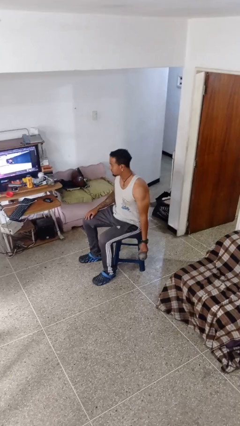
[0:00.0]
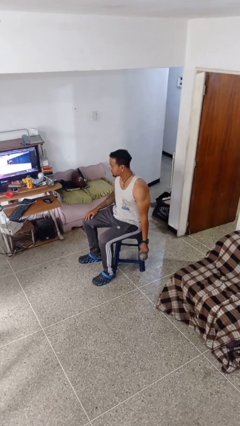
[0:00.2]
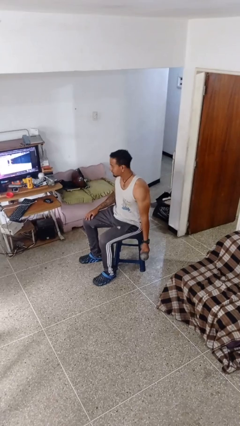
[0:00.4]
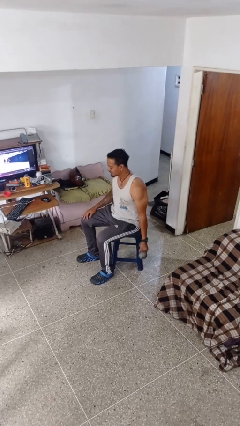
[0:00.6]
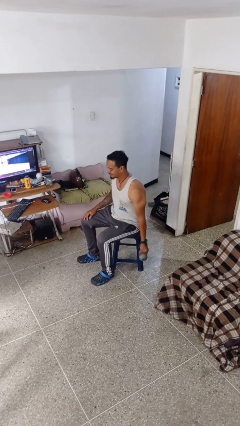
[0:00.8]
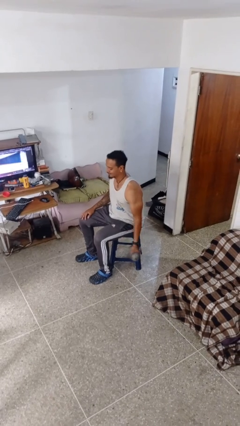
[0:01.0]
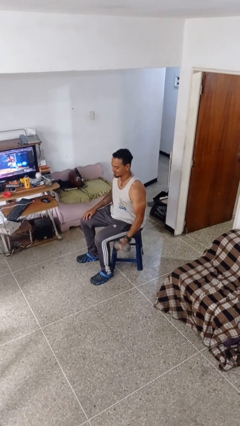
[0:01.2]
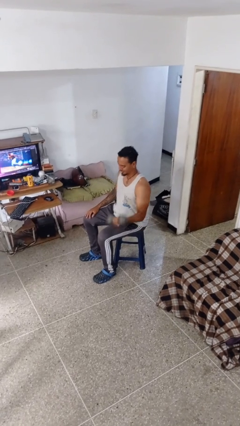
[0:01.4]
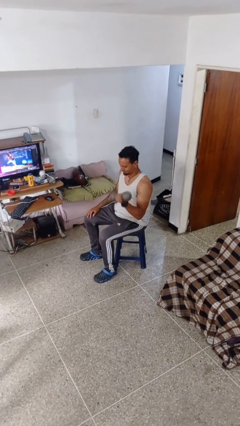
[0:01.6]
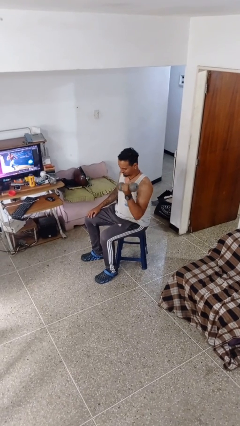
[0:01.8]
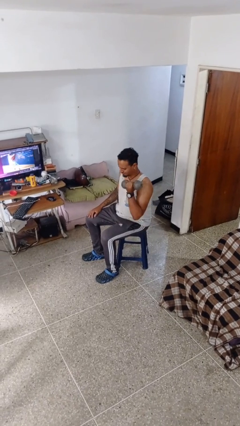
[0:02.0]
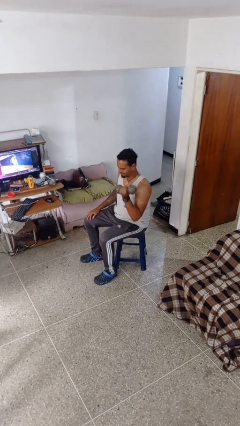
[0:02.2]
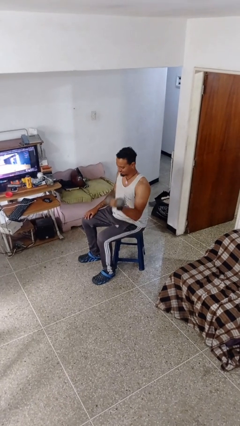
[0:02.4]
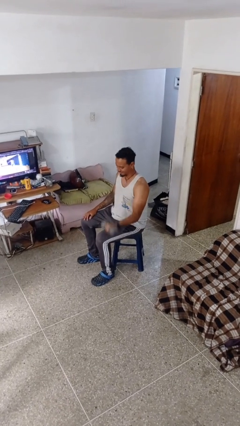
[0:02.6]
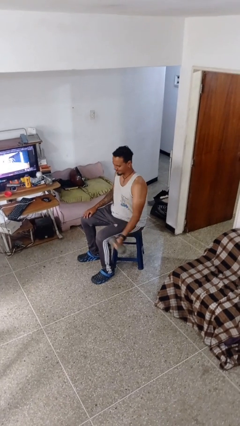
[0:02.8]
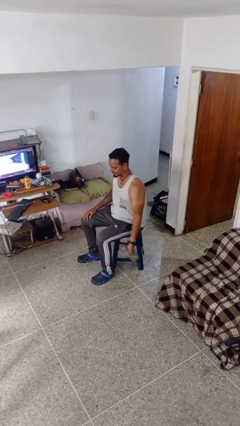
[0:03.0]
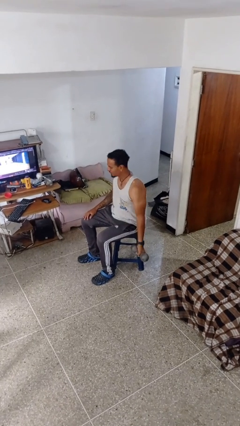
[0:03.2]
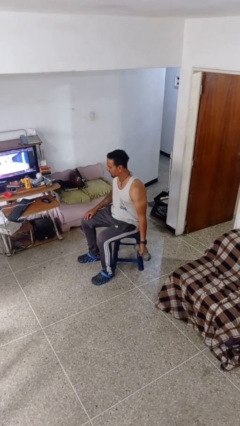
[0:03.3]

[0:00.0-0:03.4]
person lifts dumbbells

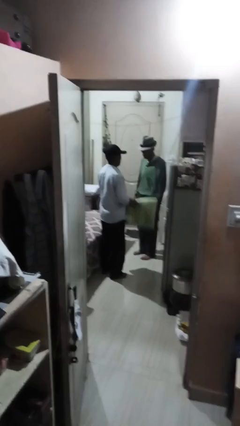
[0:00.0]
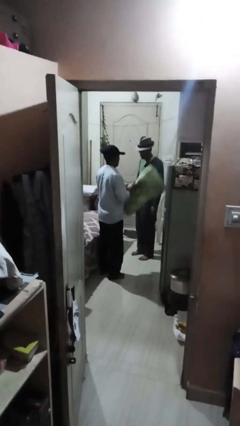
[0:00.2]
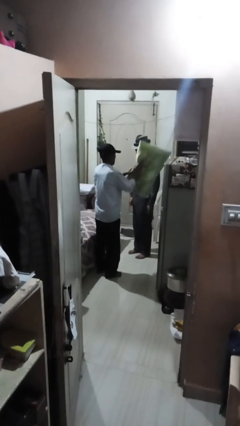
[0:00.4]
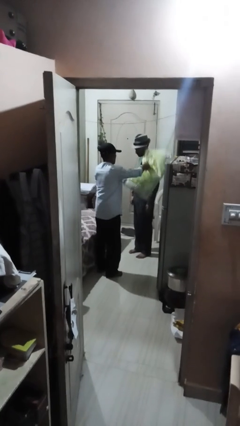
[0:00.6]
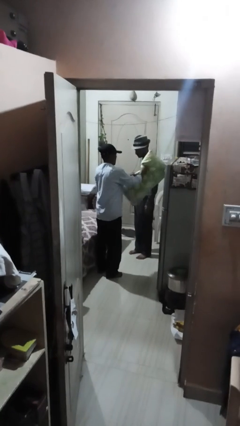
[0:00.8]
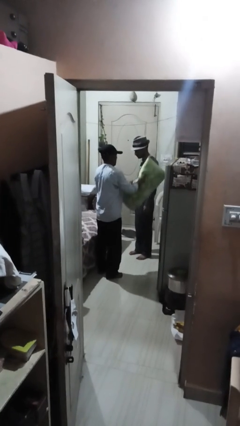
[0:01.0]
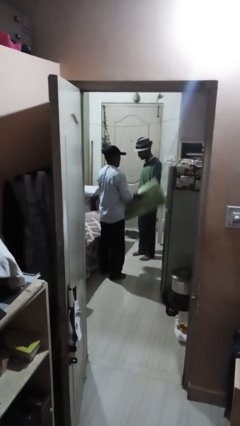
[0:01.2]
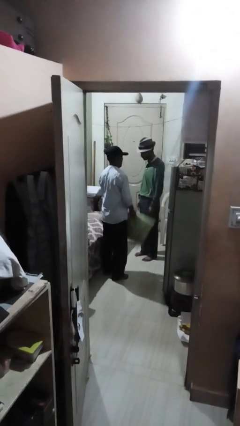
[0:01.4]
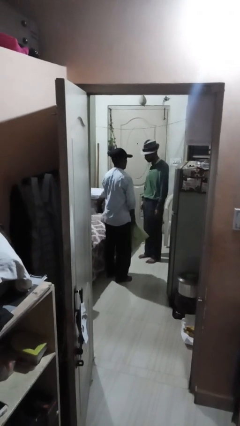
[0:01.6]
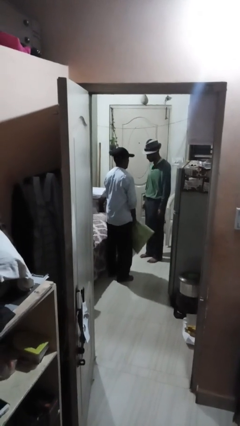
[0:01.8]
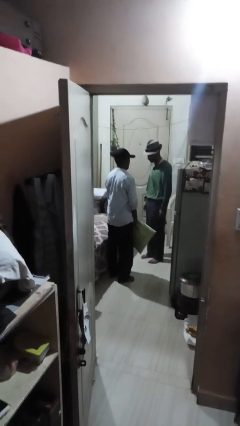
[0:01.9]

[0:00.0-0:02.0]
person hits person with pillow

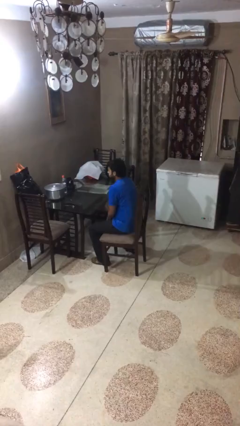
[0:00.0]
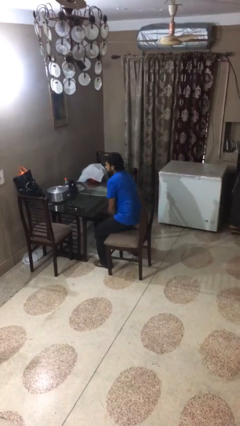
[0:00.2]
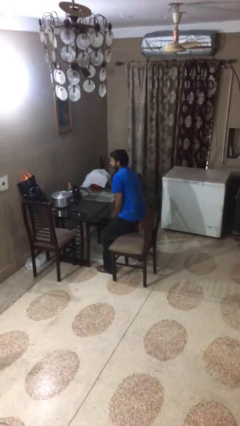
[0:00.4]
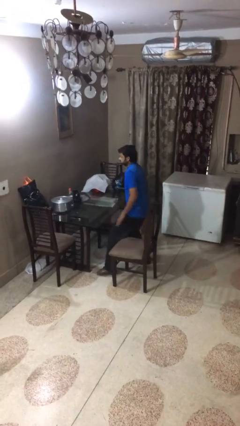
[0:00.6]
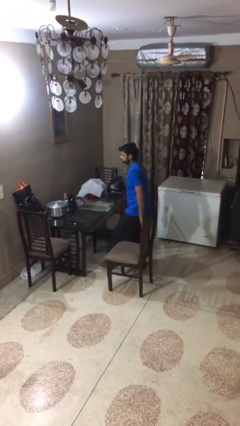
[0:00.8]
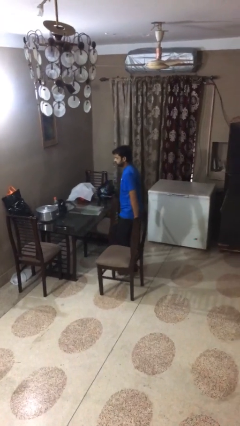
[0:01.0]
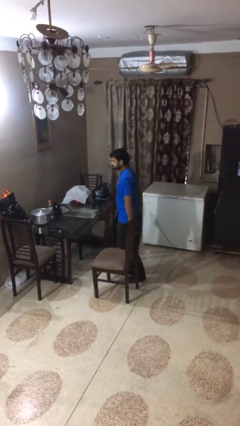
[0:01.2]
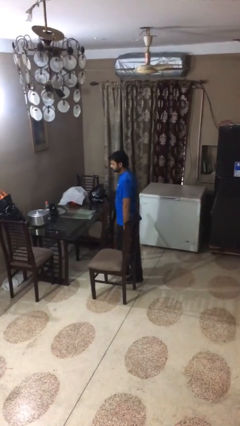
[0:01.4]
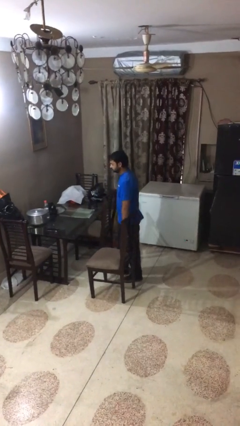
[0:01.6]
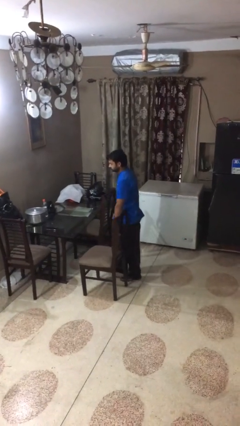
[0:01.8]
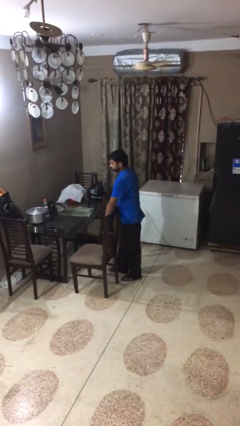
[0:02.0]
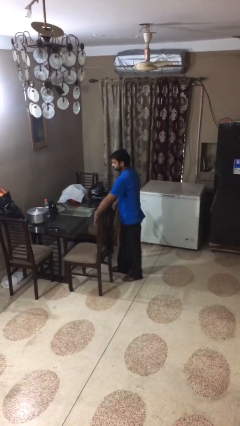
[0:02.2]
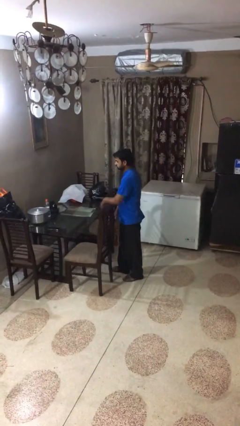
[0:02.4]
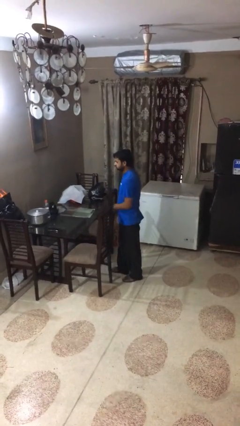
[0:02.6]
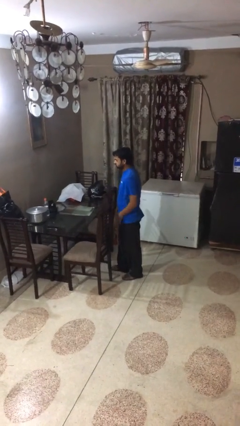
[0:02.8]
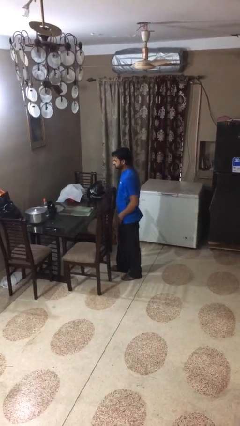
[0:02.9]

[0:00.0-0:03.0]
person stands up

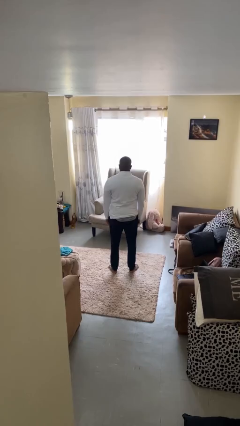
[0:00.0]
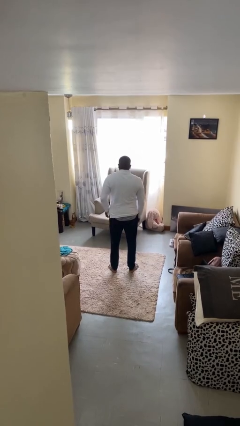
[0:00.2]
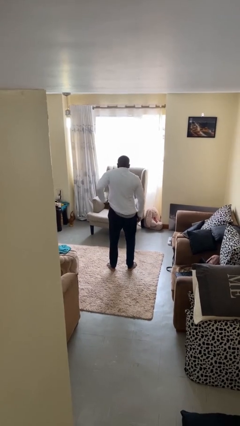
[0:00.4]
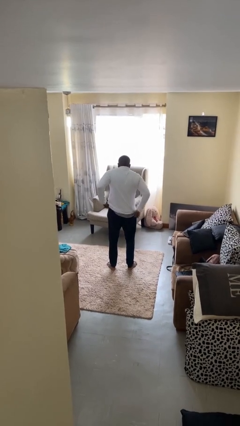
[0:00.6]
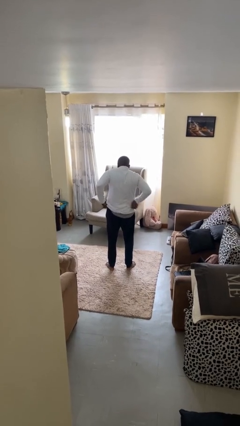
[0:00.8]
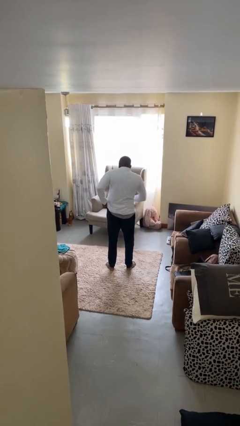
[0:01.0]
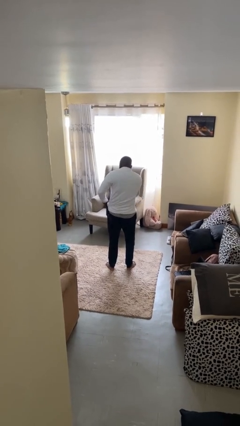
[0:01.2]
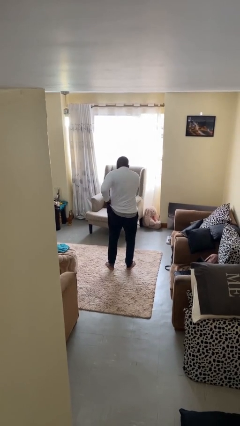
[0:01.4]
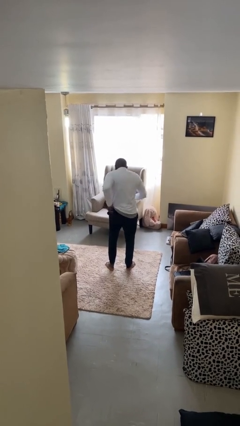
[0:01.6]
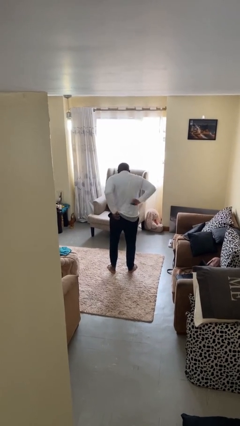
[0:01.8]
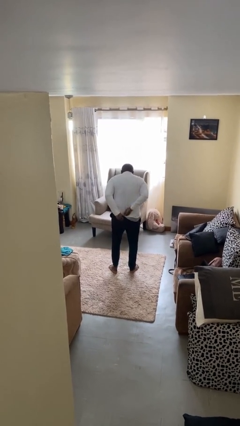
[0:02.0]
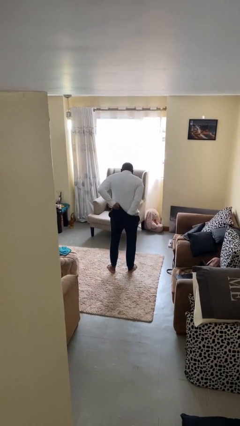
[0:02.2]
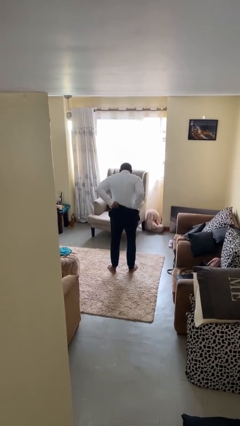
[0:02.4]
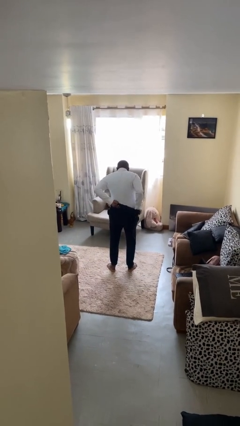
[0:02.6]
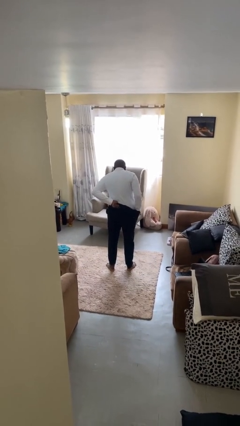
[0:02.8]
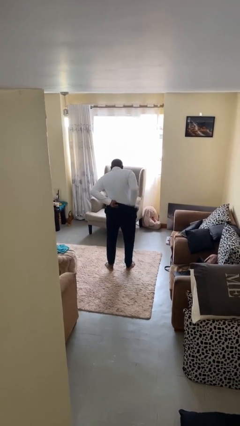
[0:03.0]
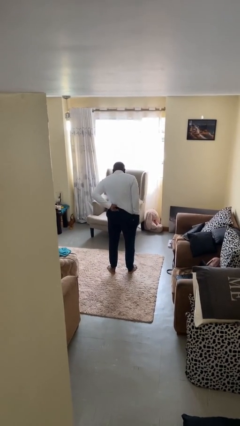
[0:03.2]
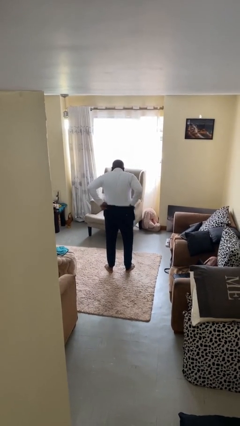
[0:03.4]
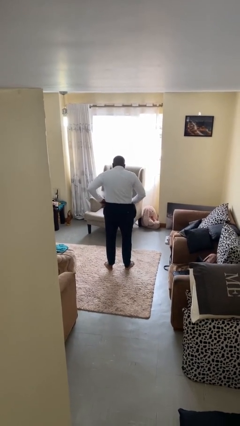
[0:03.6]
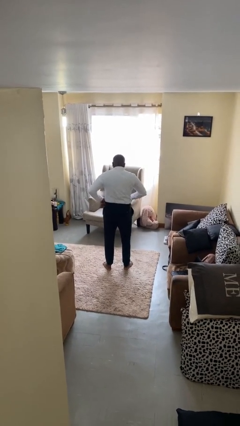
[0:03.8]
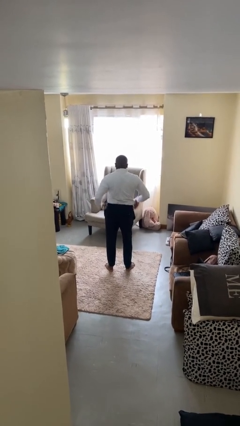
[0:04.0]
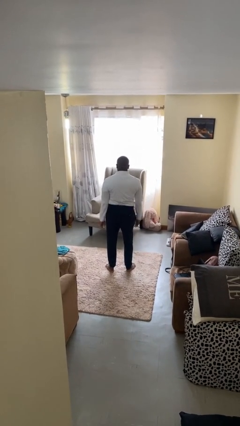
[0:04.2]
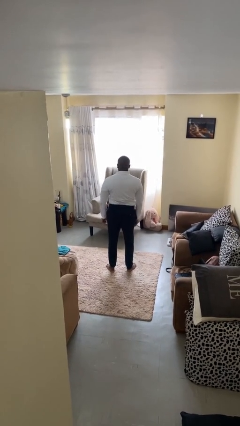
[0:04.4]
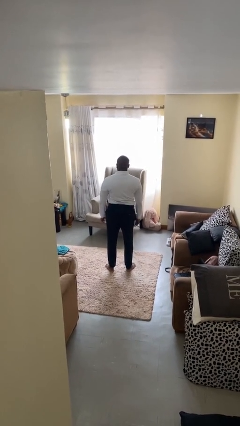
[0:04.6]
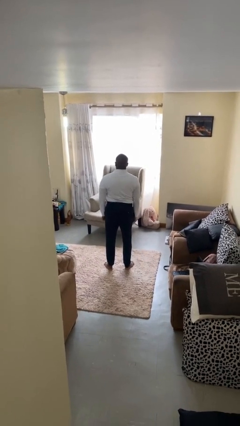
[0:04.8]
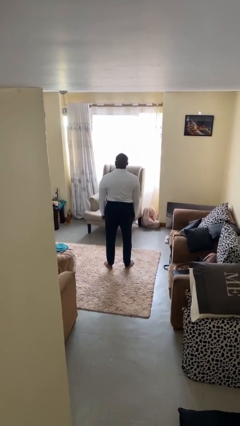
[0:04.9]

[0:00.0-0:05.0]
person tucks in shirt

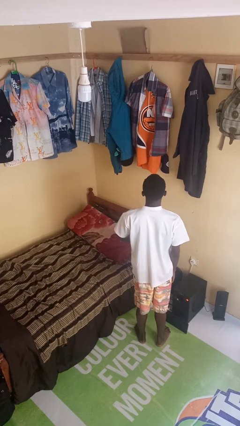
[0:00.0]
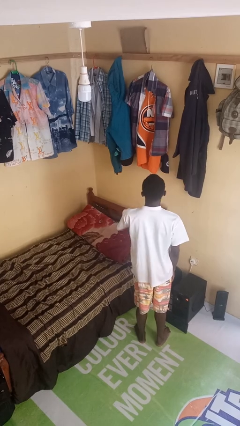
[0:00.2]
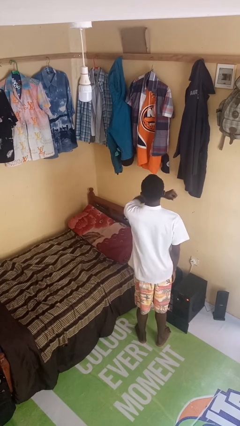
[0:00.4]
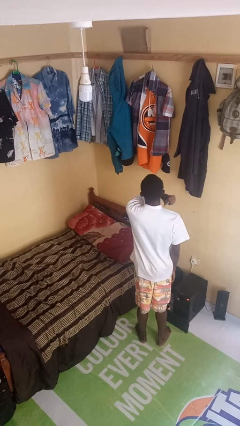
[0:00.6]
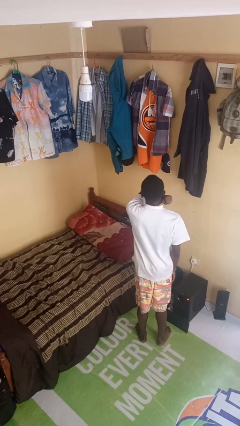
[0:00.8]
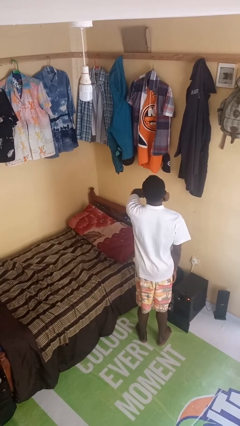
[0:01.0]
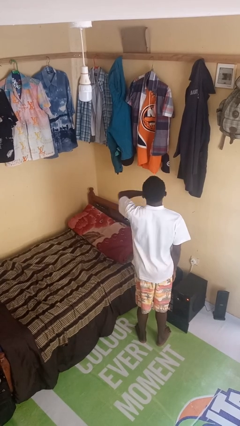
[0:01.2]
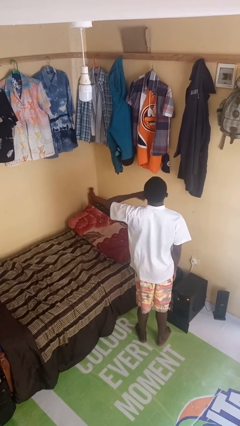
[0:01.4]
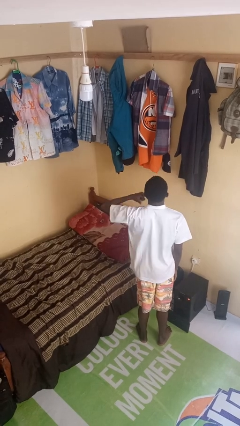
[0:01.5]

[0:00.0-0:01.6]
person gestures cut

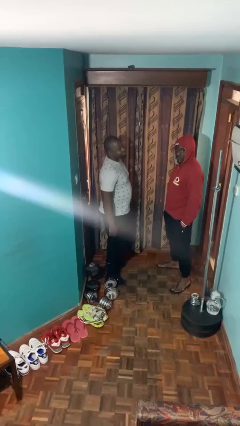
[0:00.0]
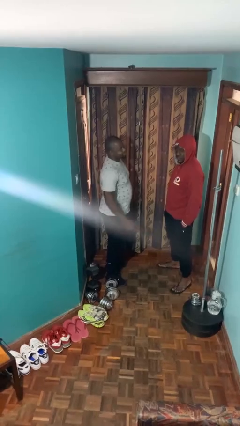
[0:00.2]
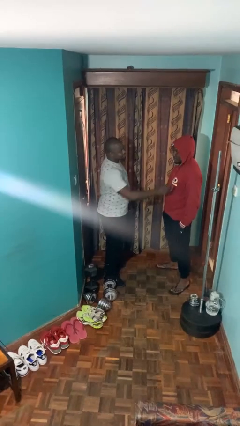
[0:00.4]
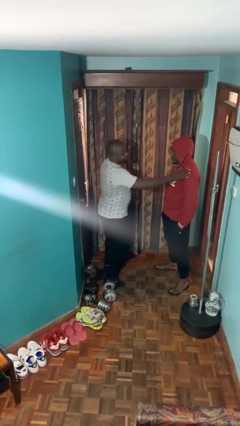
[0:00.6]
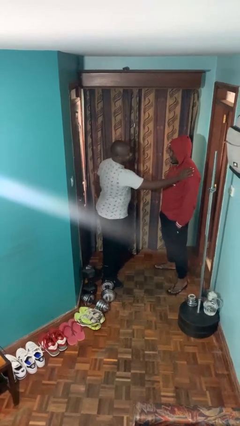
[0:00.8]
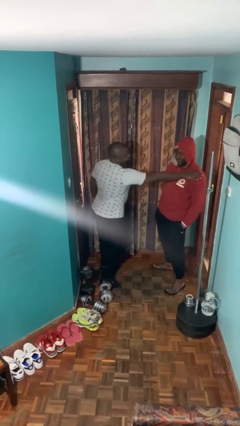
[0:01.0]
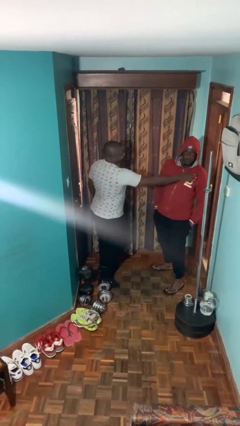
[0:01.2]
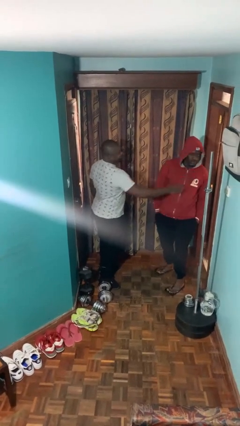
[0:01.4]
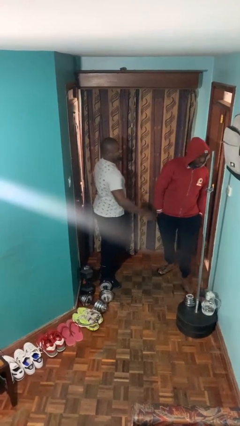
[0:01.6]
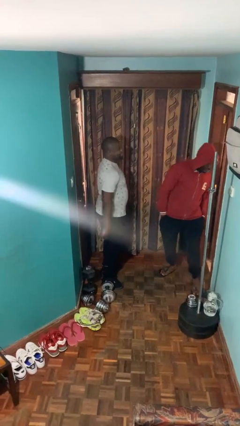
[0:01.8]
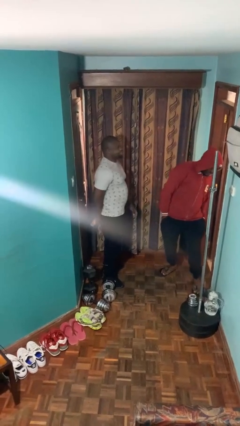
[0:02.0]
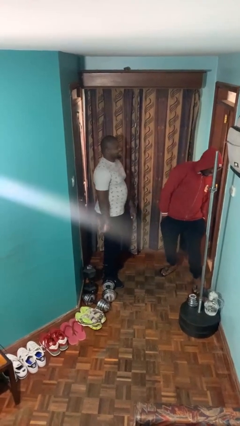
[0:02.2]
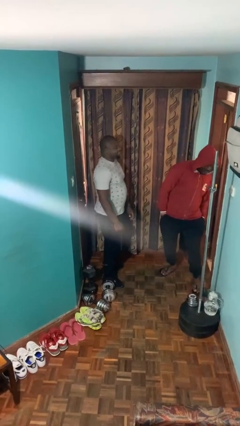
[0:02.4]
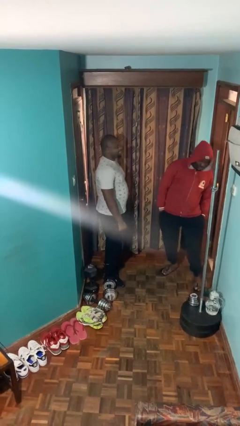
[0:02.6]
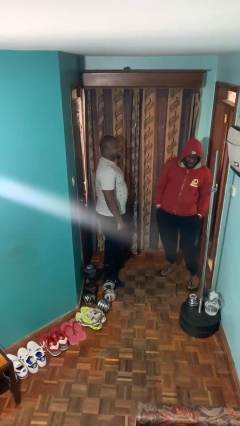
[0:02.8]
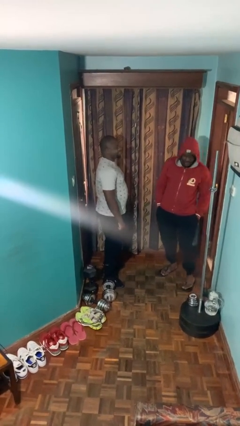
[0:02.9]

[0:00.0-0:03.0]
person shoves person
